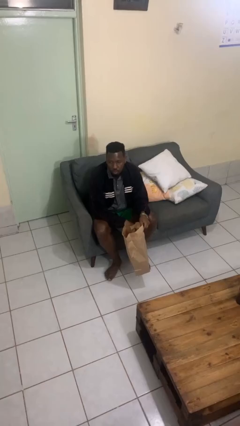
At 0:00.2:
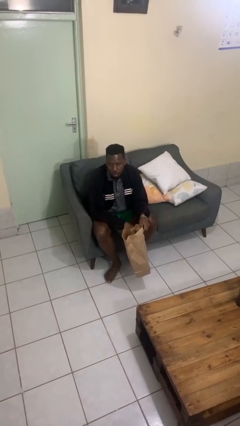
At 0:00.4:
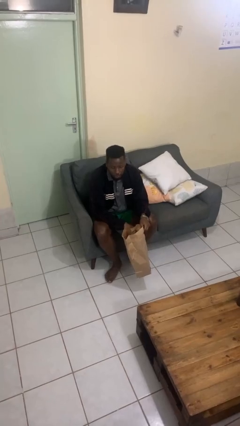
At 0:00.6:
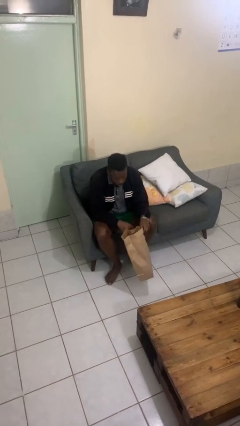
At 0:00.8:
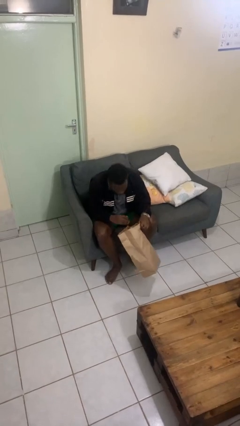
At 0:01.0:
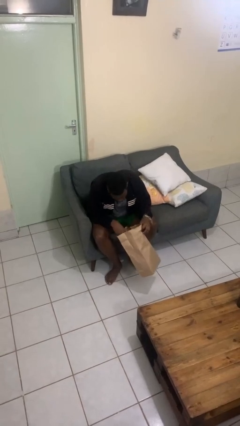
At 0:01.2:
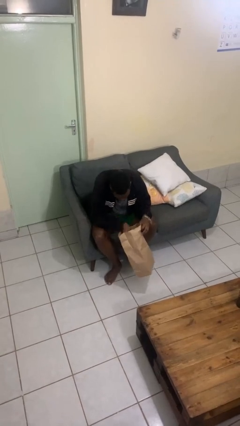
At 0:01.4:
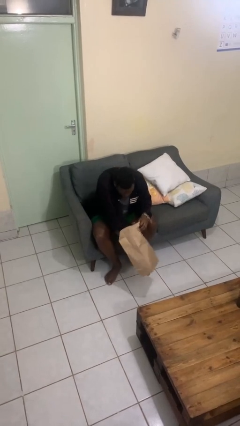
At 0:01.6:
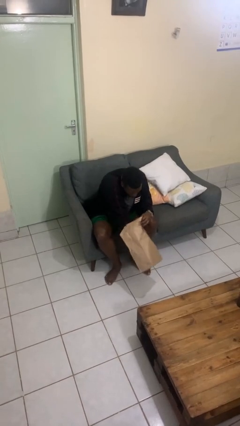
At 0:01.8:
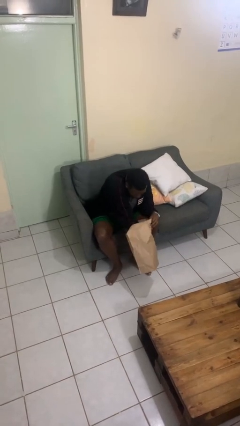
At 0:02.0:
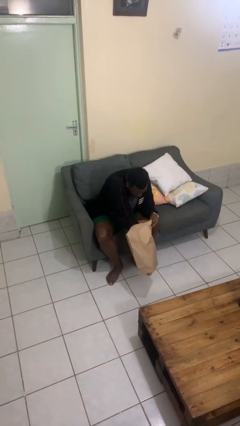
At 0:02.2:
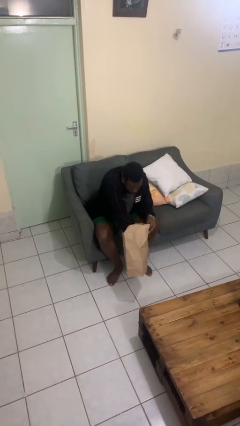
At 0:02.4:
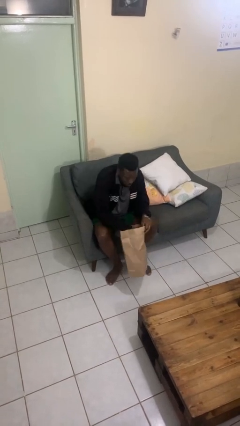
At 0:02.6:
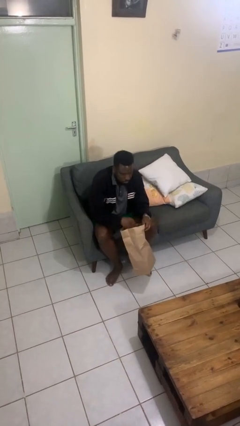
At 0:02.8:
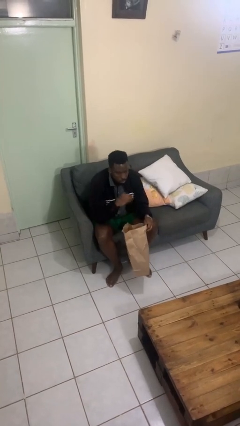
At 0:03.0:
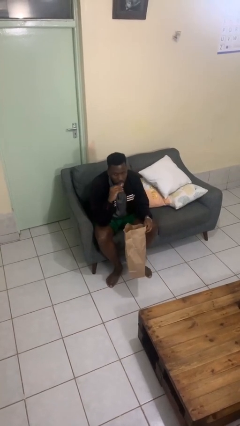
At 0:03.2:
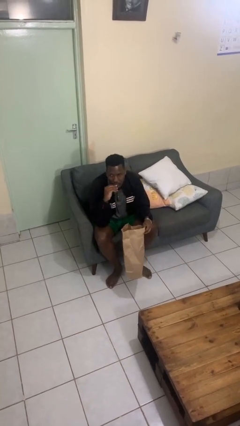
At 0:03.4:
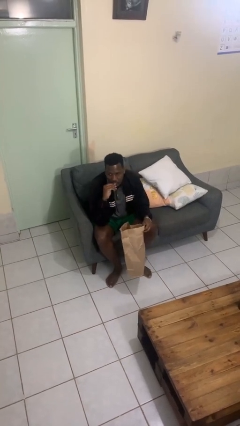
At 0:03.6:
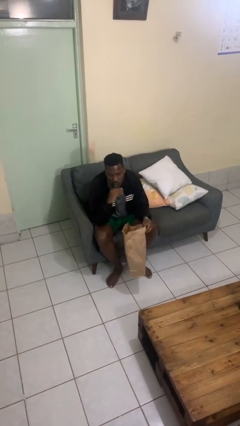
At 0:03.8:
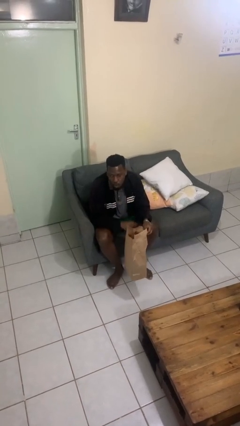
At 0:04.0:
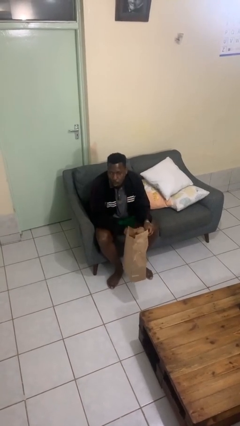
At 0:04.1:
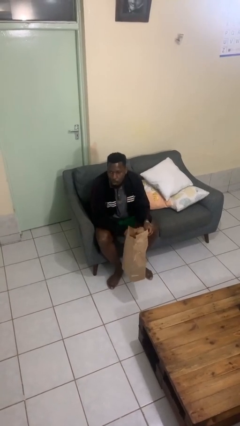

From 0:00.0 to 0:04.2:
person eats snack from bag

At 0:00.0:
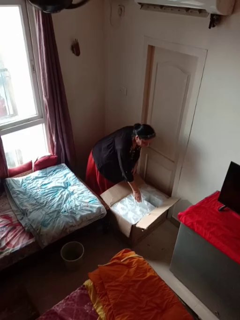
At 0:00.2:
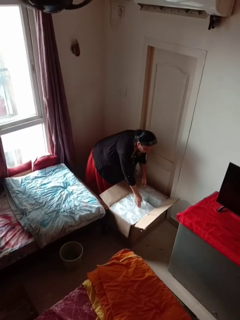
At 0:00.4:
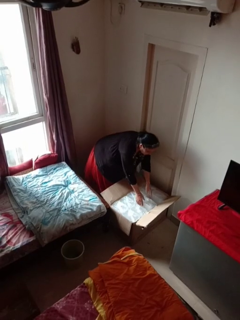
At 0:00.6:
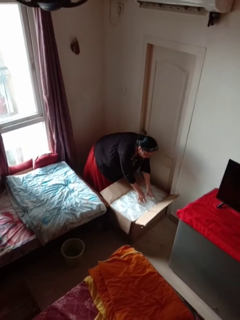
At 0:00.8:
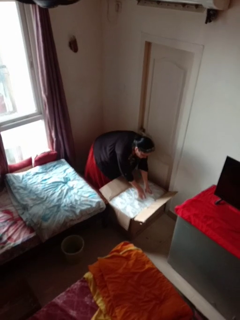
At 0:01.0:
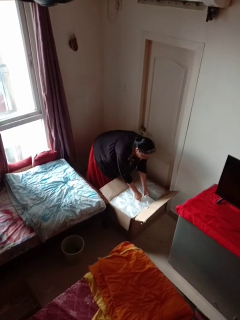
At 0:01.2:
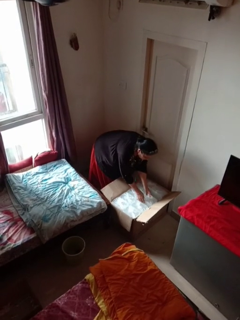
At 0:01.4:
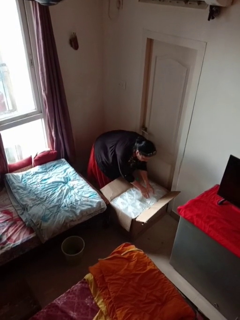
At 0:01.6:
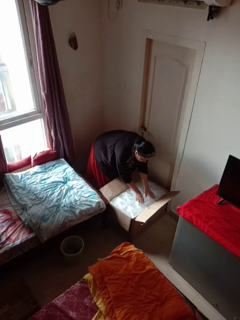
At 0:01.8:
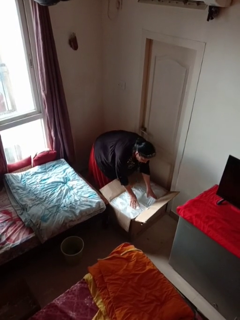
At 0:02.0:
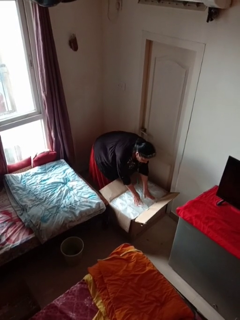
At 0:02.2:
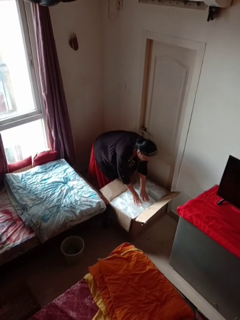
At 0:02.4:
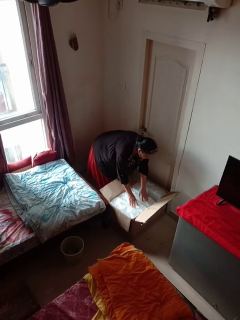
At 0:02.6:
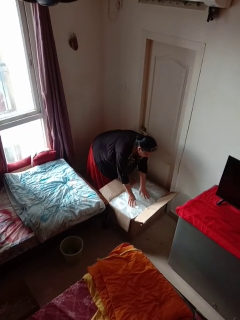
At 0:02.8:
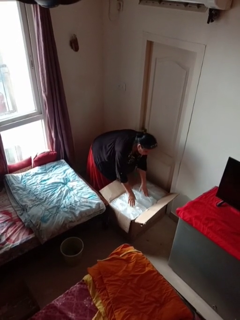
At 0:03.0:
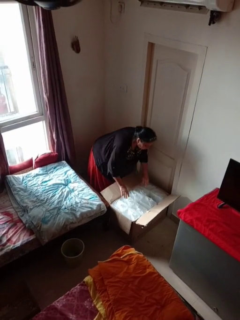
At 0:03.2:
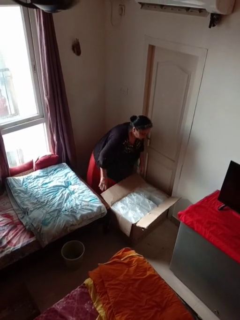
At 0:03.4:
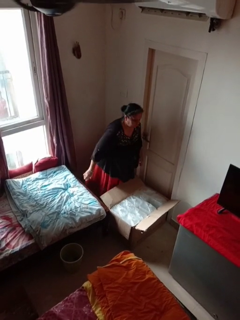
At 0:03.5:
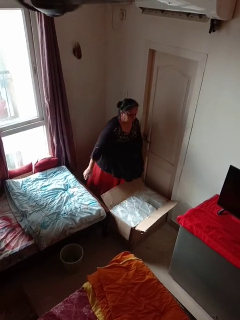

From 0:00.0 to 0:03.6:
person searches in box

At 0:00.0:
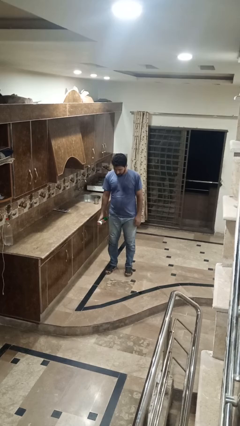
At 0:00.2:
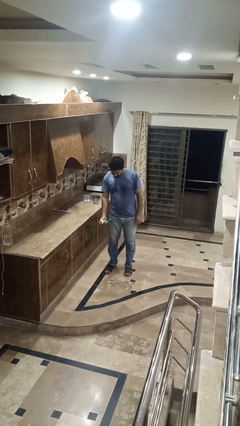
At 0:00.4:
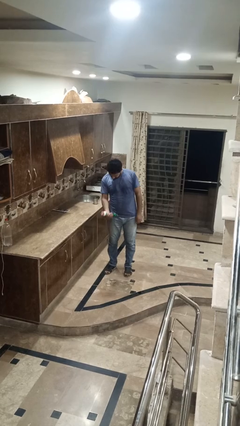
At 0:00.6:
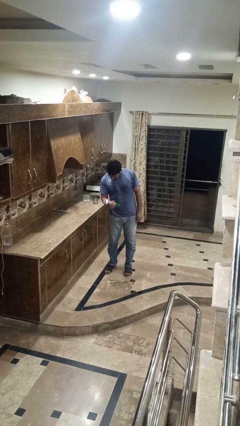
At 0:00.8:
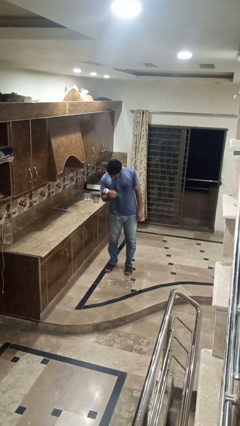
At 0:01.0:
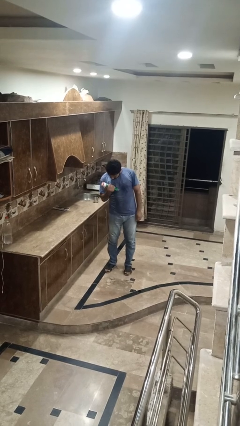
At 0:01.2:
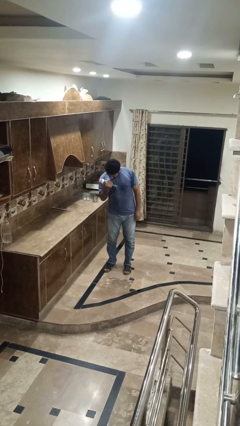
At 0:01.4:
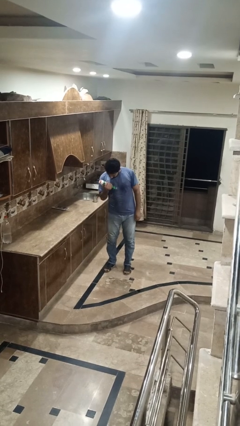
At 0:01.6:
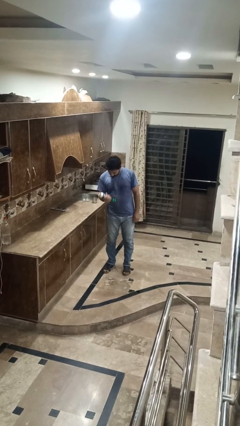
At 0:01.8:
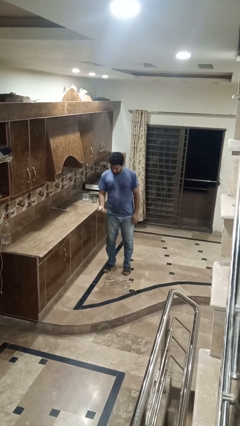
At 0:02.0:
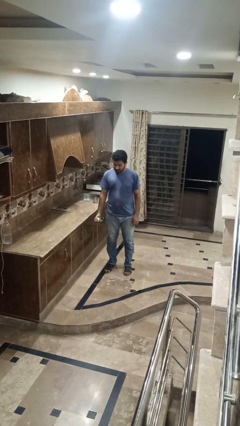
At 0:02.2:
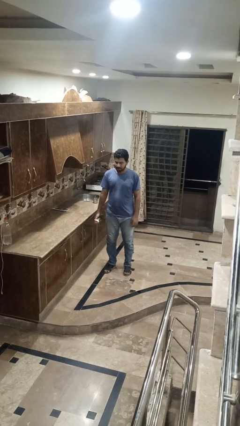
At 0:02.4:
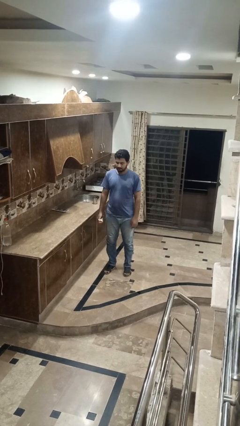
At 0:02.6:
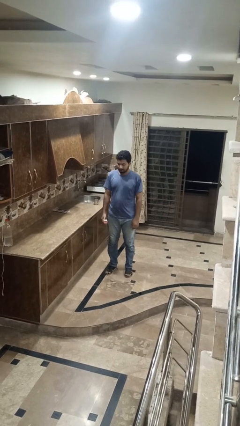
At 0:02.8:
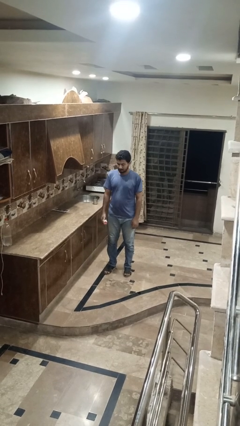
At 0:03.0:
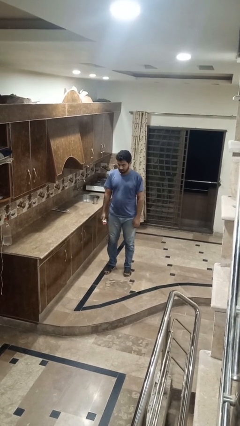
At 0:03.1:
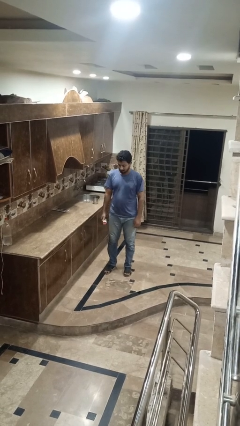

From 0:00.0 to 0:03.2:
person lifts dumbbells

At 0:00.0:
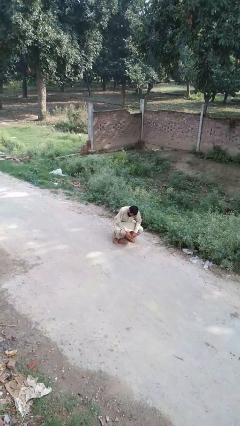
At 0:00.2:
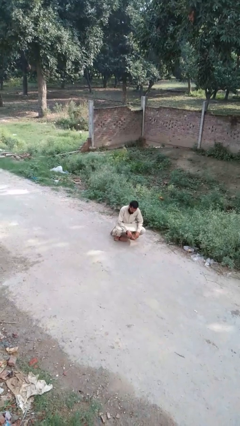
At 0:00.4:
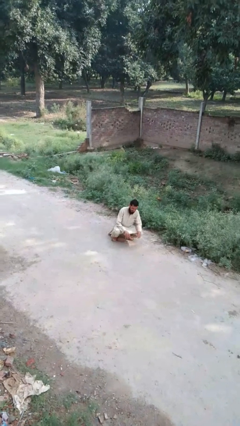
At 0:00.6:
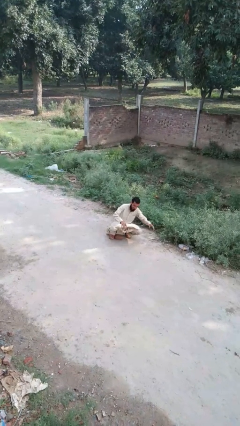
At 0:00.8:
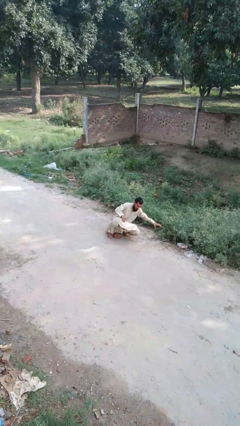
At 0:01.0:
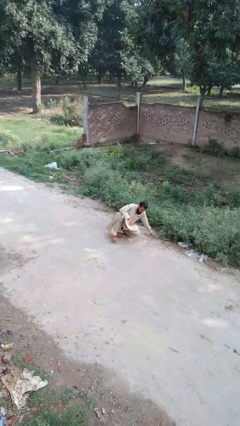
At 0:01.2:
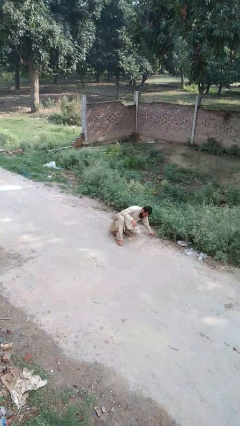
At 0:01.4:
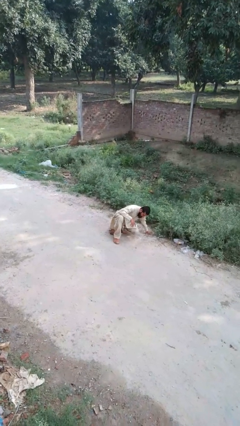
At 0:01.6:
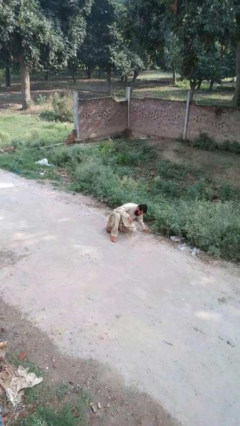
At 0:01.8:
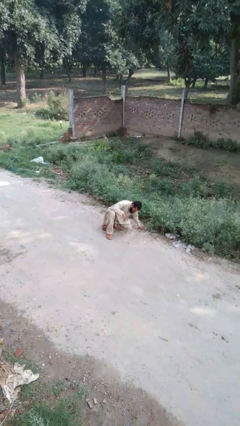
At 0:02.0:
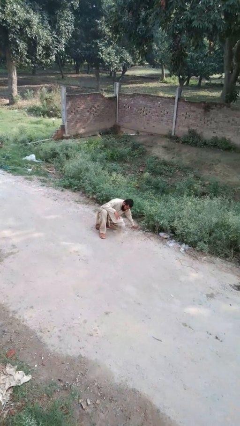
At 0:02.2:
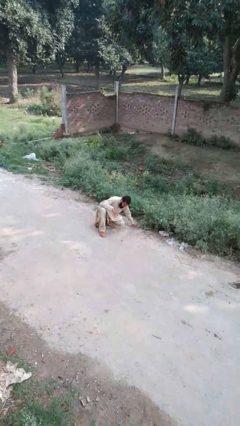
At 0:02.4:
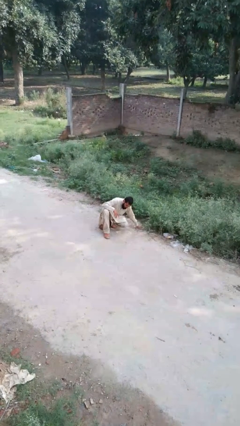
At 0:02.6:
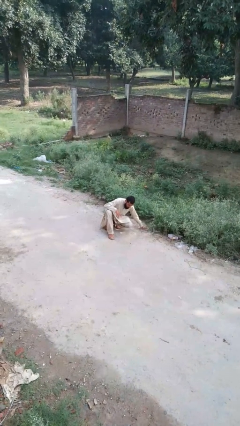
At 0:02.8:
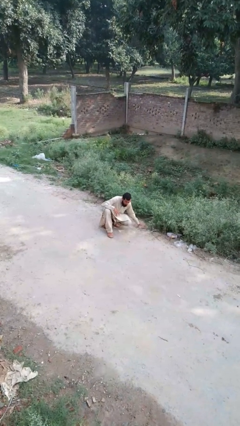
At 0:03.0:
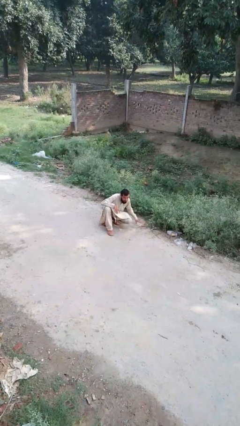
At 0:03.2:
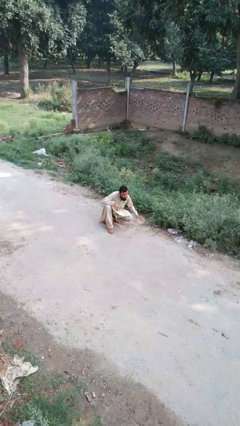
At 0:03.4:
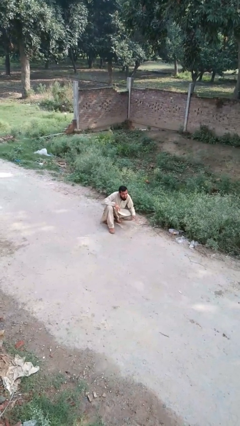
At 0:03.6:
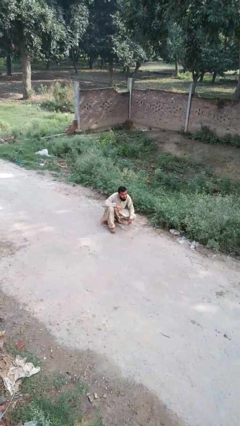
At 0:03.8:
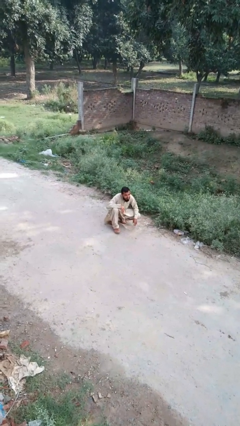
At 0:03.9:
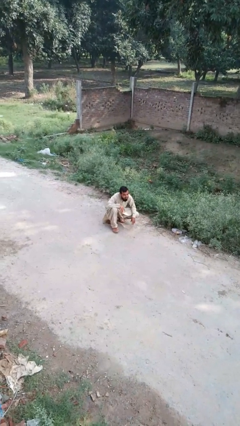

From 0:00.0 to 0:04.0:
person lies down on floor

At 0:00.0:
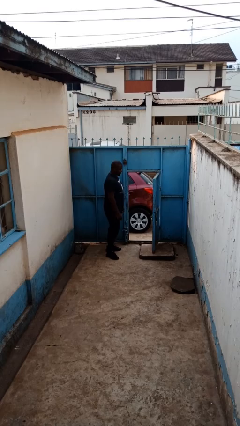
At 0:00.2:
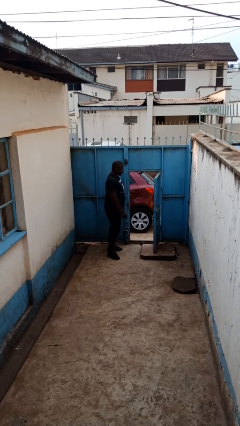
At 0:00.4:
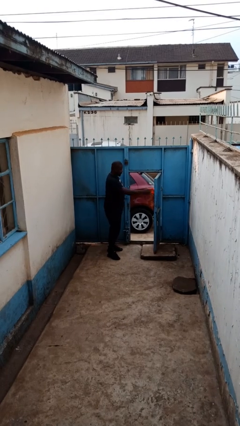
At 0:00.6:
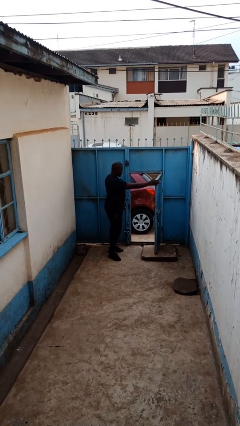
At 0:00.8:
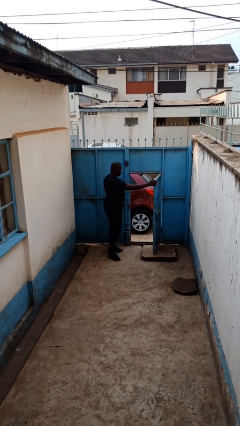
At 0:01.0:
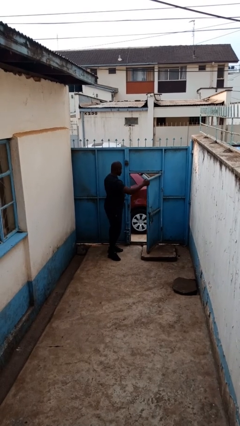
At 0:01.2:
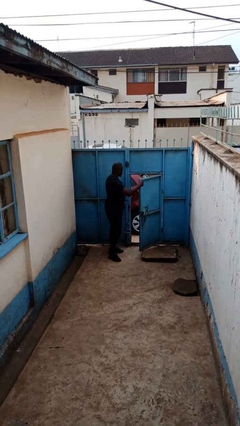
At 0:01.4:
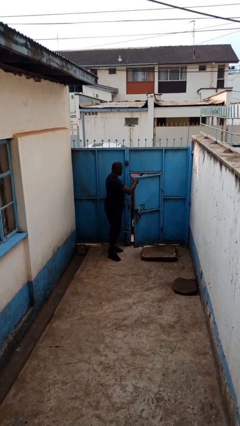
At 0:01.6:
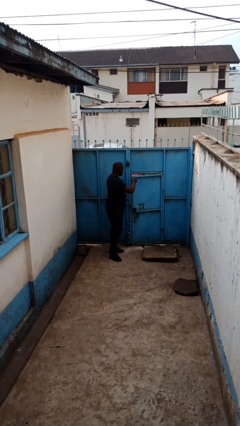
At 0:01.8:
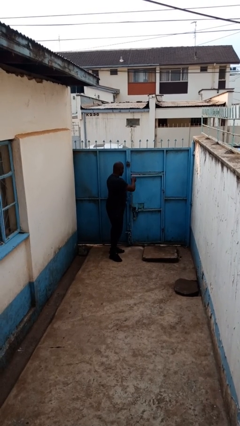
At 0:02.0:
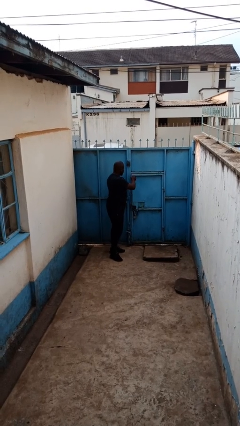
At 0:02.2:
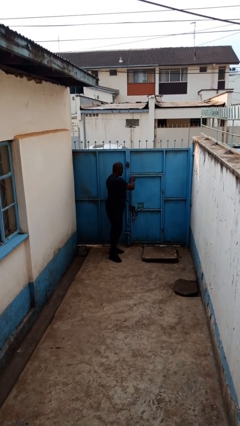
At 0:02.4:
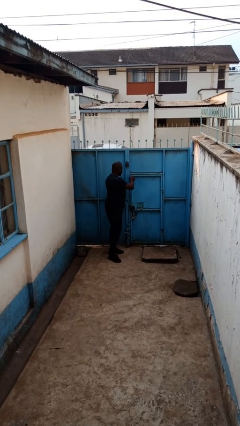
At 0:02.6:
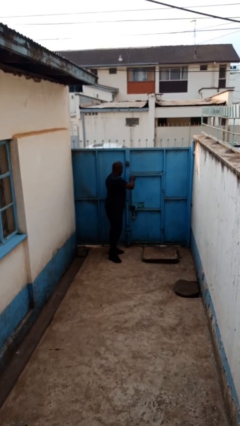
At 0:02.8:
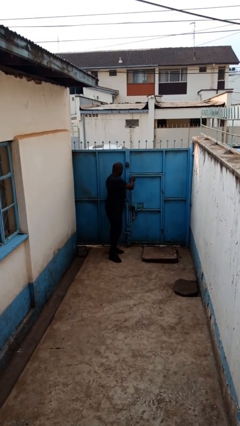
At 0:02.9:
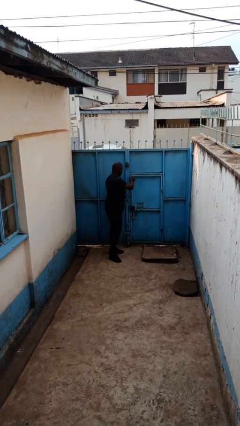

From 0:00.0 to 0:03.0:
person closes gate

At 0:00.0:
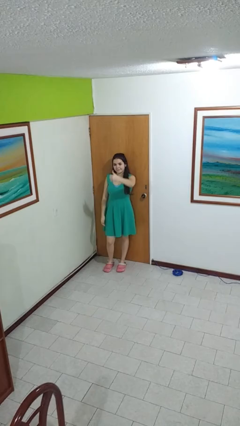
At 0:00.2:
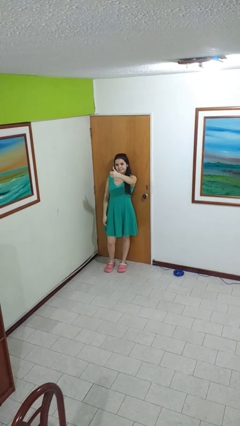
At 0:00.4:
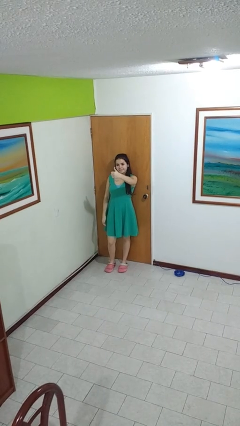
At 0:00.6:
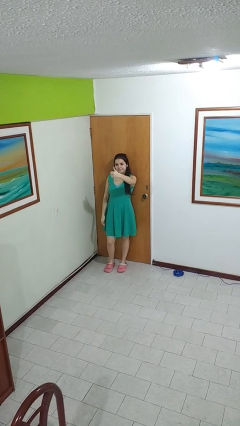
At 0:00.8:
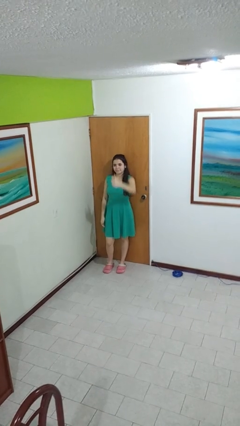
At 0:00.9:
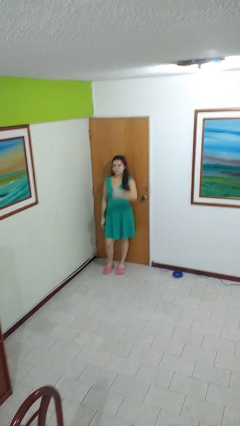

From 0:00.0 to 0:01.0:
person gestures thumbs up
